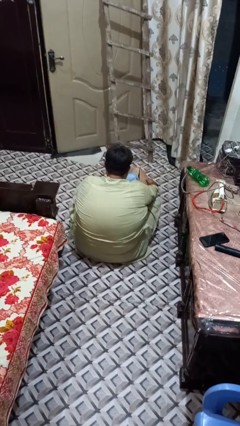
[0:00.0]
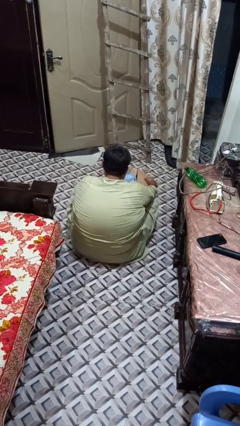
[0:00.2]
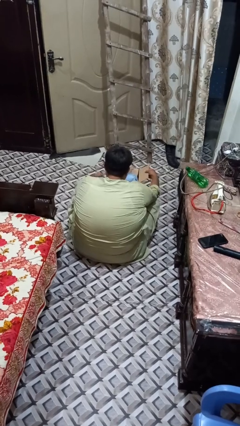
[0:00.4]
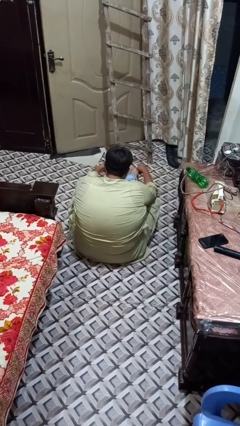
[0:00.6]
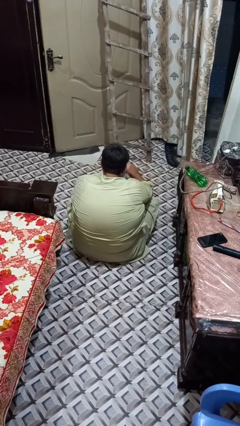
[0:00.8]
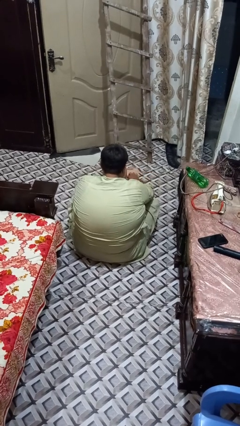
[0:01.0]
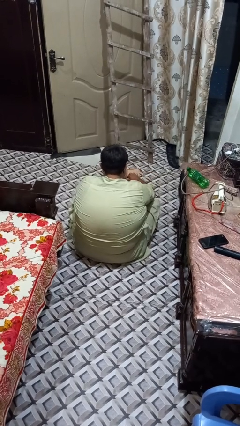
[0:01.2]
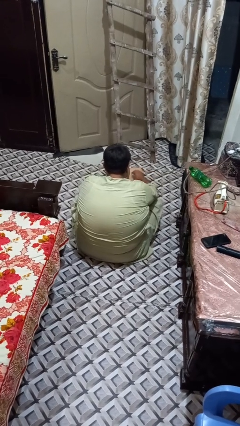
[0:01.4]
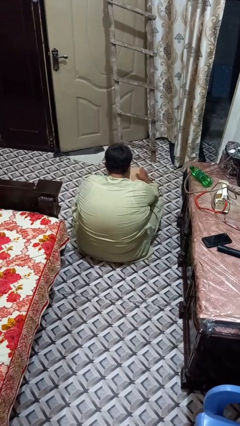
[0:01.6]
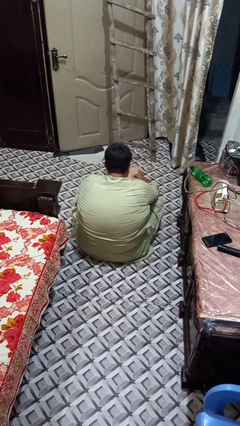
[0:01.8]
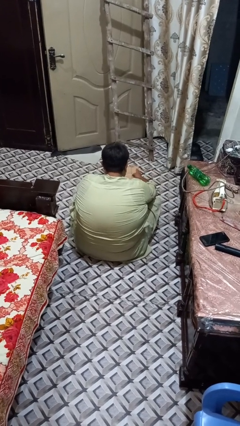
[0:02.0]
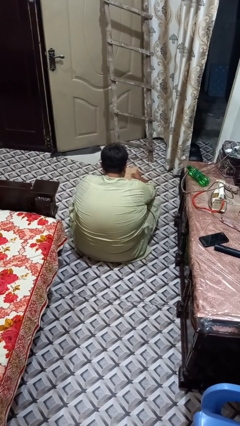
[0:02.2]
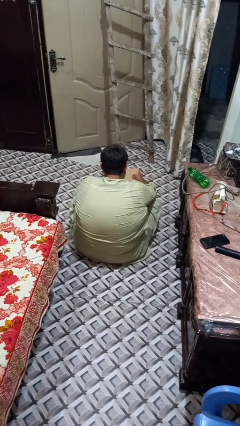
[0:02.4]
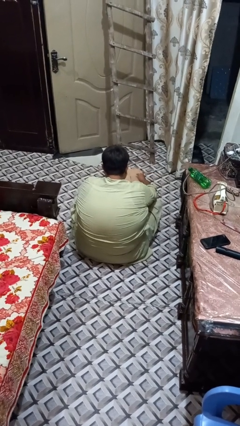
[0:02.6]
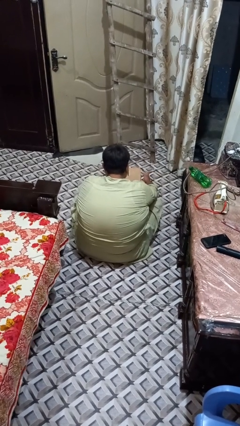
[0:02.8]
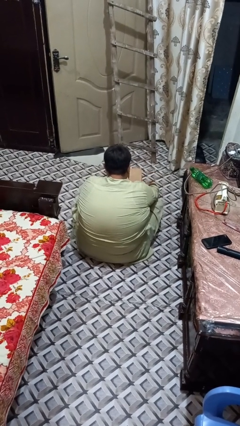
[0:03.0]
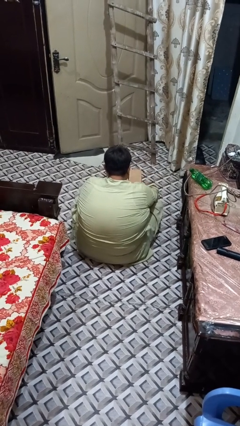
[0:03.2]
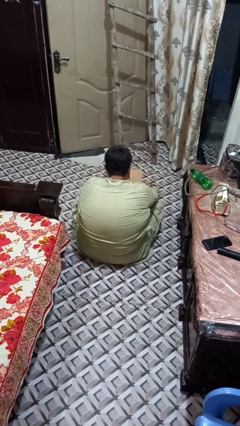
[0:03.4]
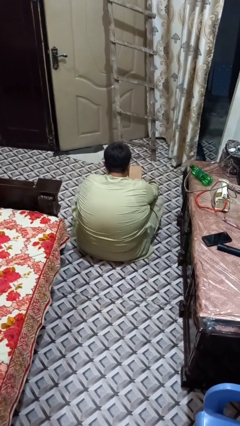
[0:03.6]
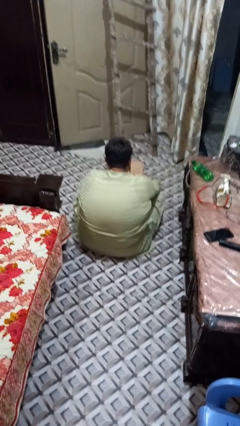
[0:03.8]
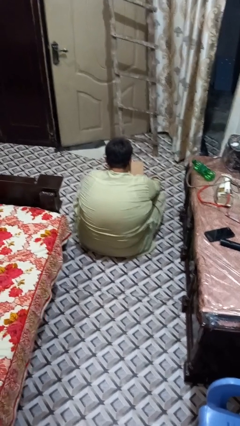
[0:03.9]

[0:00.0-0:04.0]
person closes box

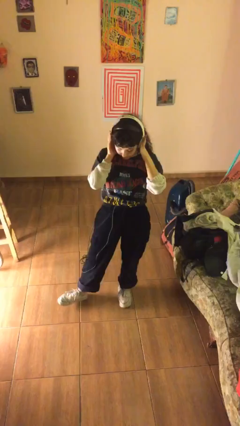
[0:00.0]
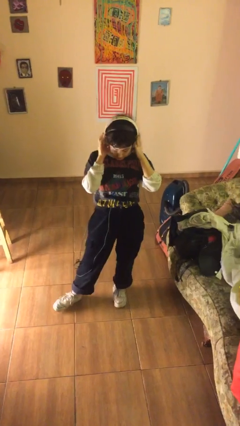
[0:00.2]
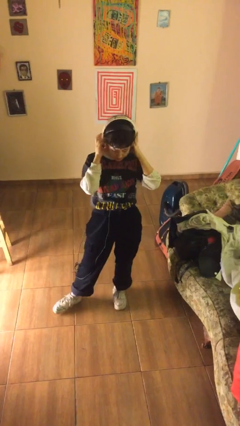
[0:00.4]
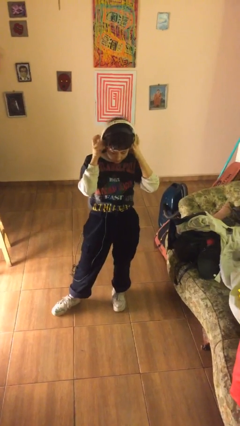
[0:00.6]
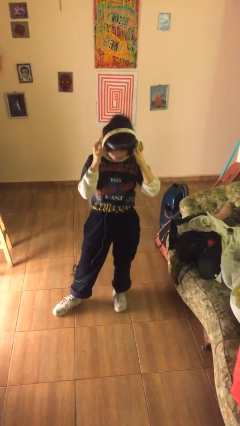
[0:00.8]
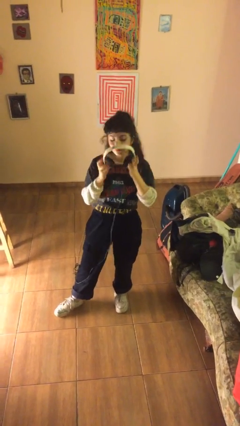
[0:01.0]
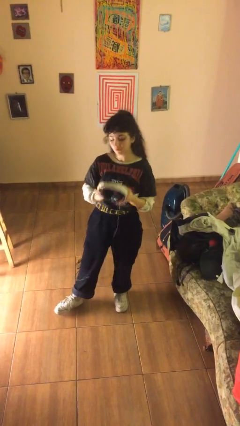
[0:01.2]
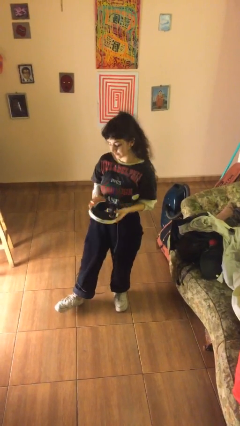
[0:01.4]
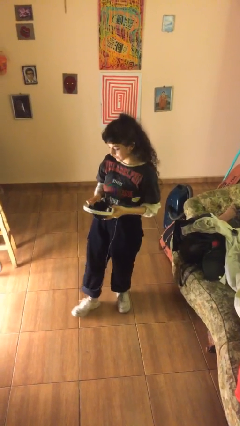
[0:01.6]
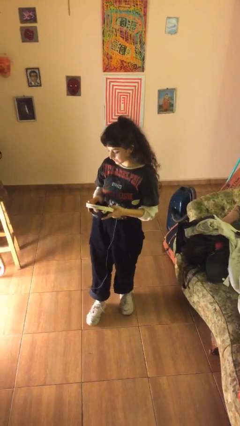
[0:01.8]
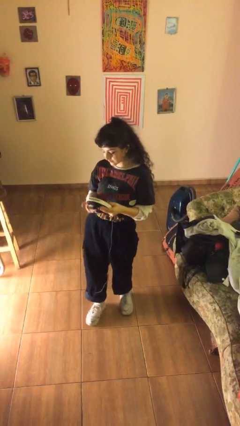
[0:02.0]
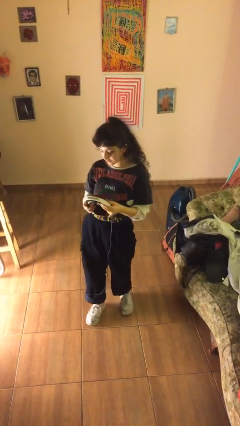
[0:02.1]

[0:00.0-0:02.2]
person takes off headphones

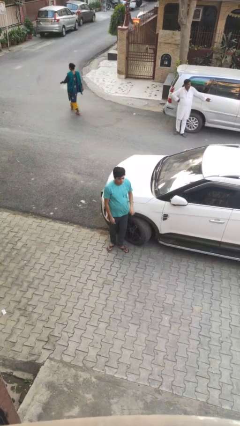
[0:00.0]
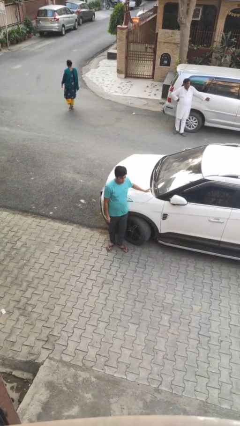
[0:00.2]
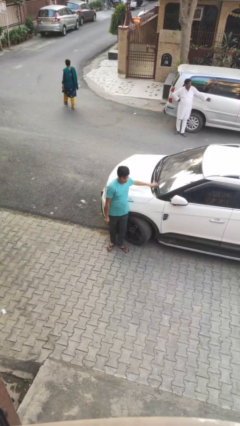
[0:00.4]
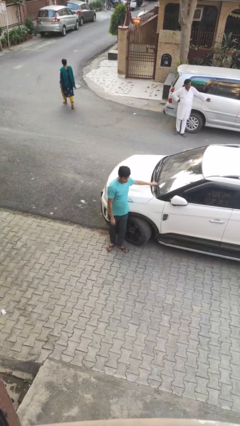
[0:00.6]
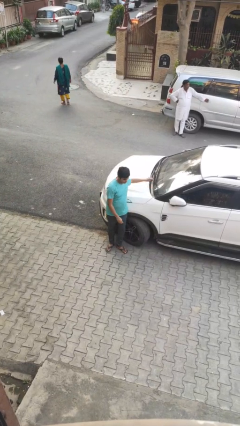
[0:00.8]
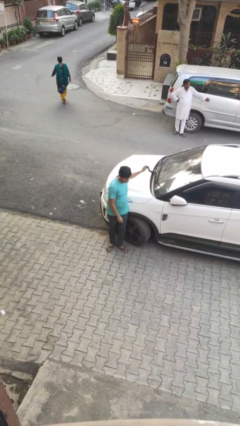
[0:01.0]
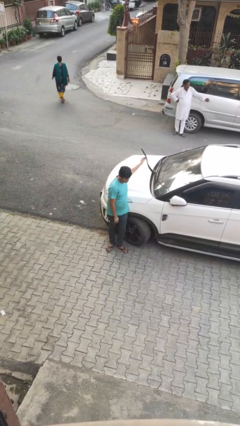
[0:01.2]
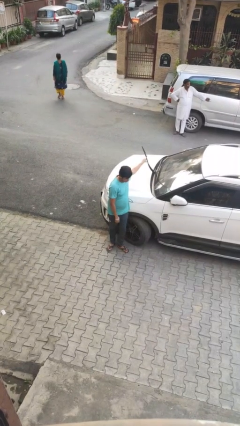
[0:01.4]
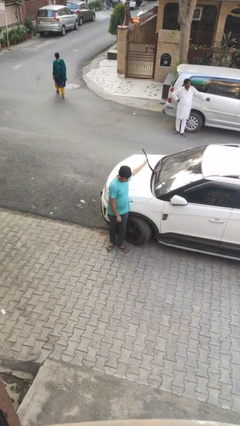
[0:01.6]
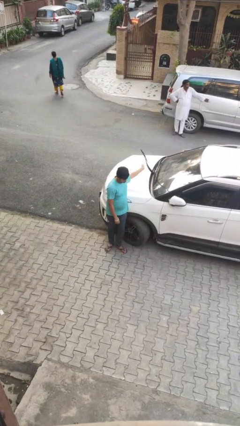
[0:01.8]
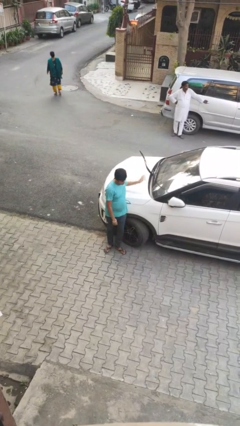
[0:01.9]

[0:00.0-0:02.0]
person flips up car wipers

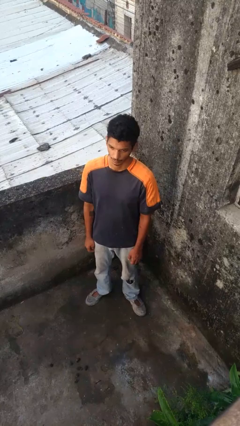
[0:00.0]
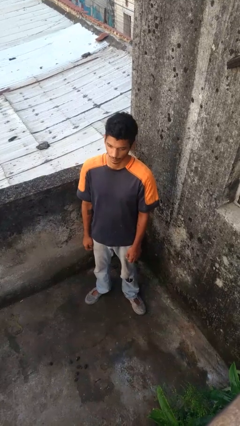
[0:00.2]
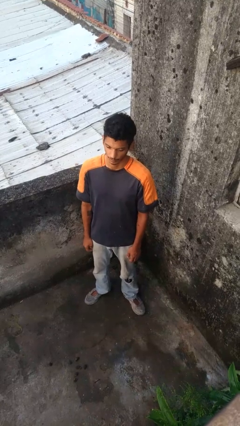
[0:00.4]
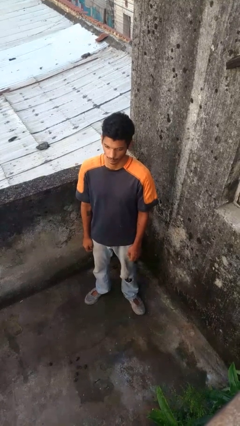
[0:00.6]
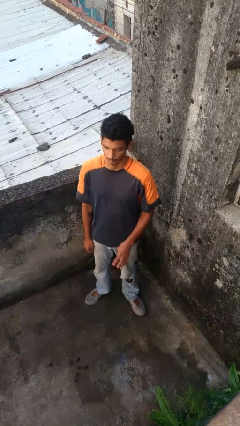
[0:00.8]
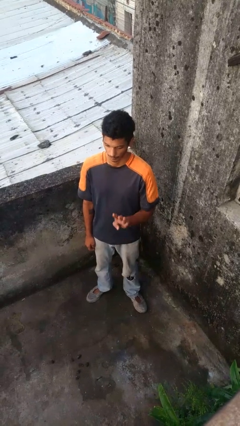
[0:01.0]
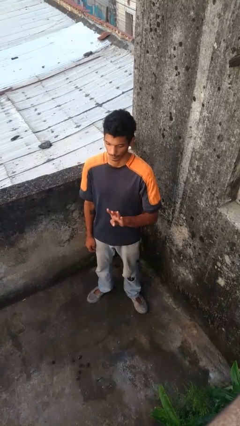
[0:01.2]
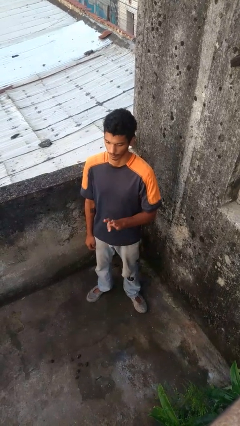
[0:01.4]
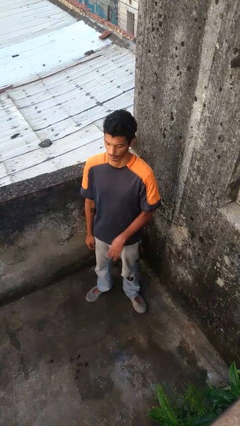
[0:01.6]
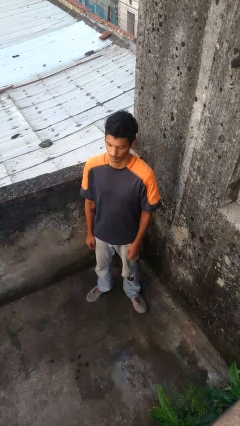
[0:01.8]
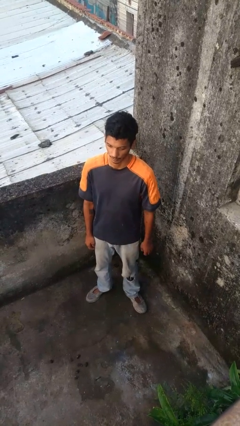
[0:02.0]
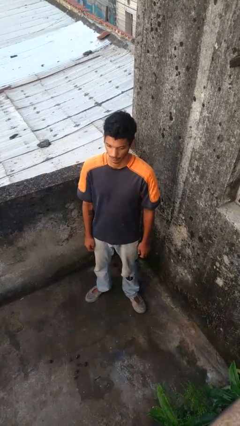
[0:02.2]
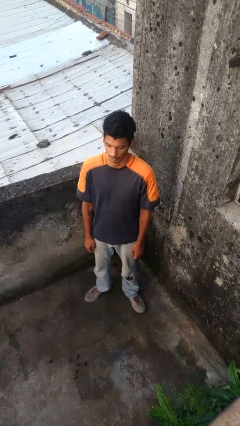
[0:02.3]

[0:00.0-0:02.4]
person gestures number four

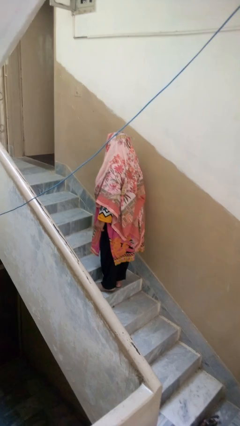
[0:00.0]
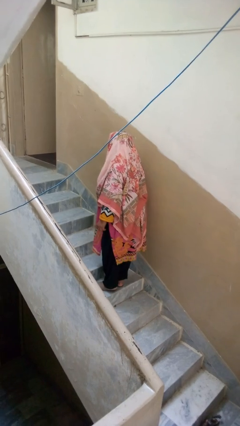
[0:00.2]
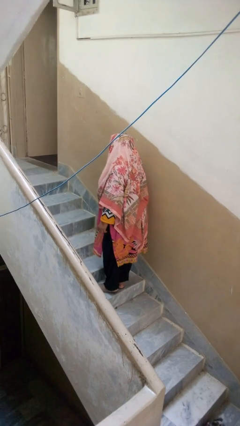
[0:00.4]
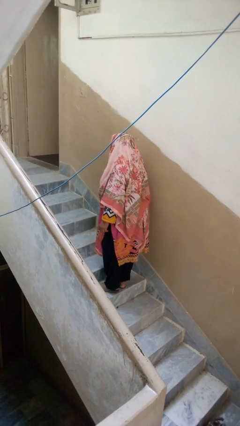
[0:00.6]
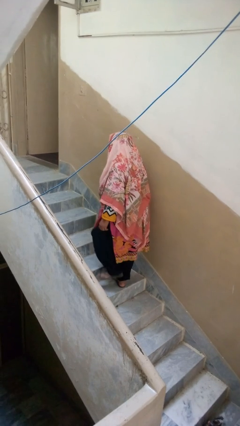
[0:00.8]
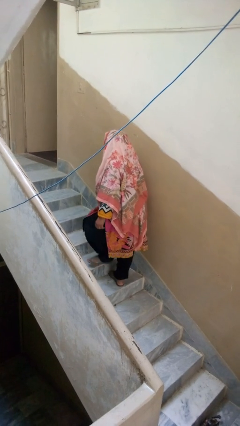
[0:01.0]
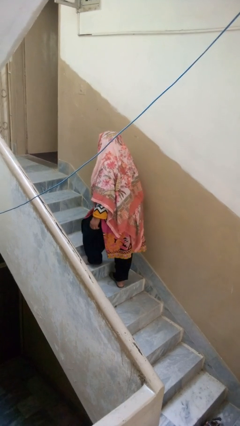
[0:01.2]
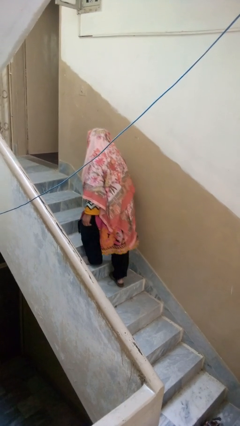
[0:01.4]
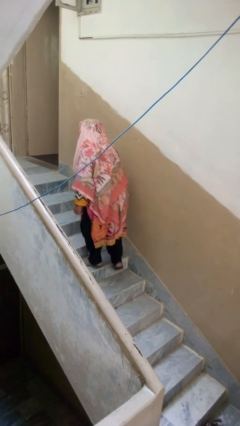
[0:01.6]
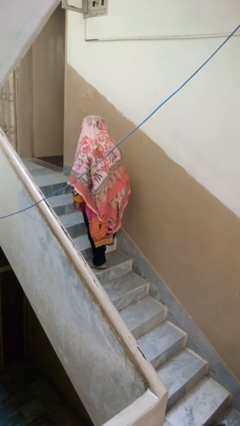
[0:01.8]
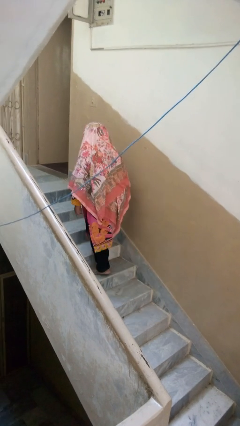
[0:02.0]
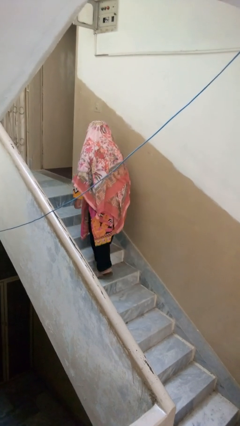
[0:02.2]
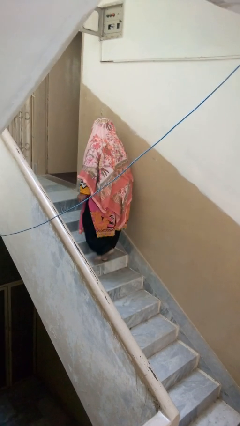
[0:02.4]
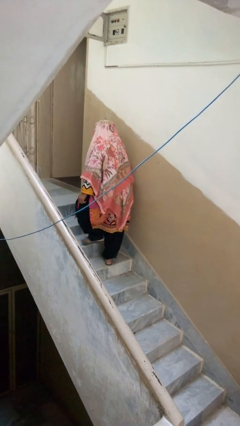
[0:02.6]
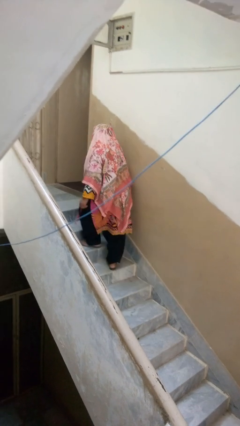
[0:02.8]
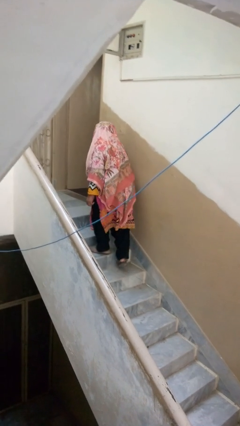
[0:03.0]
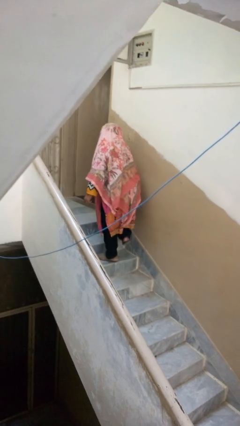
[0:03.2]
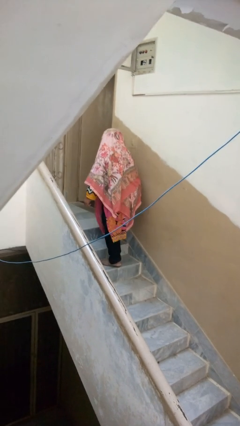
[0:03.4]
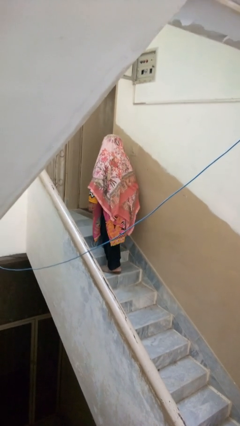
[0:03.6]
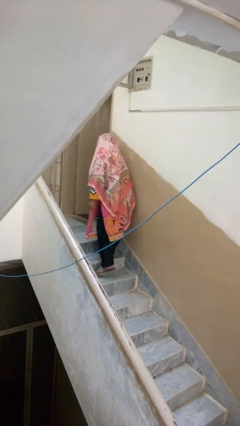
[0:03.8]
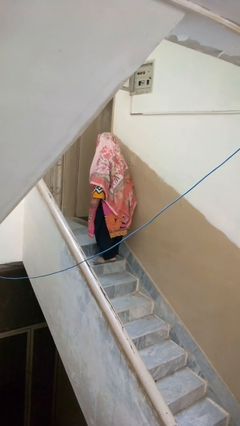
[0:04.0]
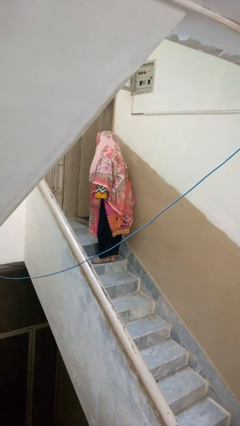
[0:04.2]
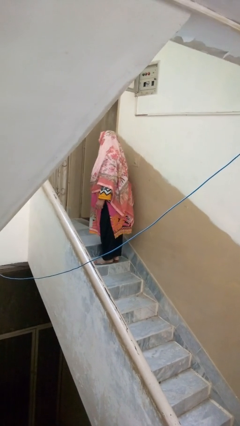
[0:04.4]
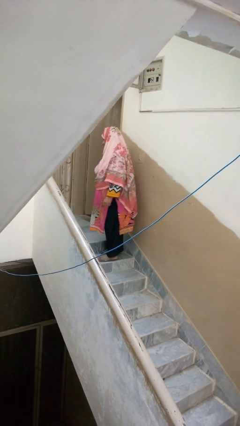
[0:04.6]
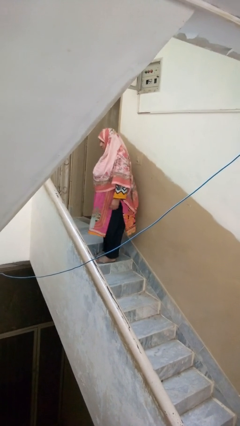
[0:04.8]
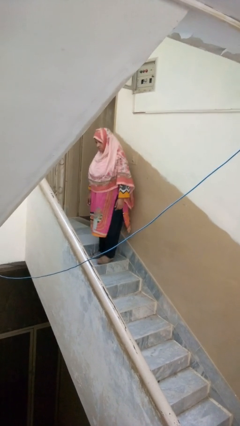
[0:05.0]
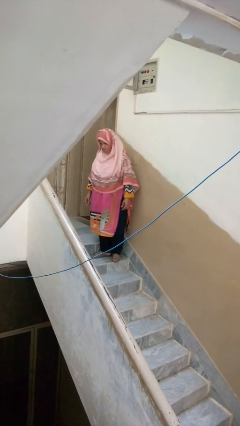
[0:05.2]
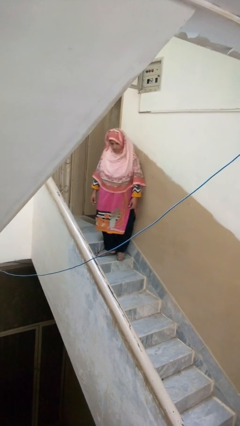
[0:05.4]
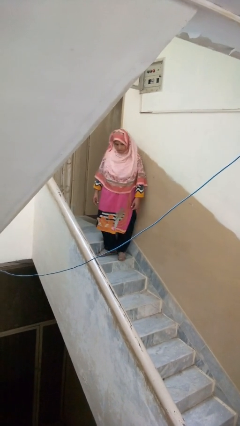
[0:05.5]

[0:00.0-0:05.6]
person climbs up stairs

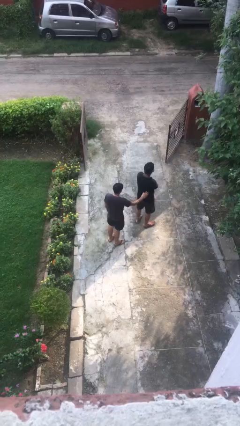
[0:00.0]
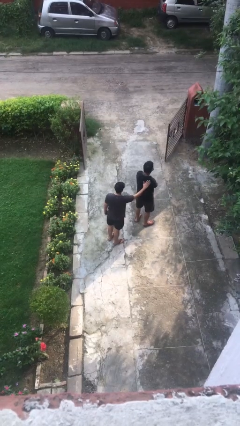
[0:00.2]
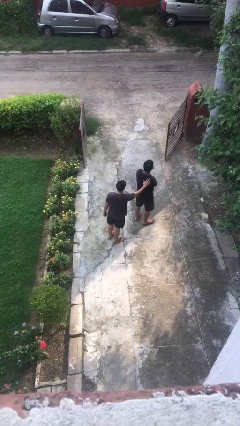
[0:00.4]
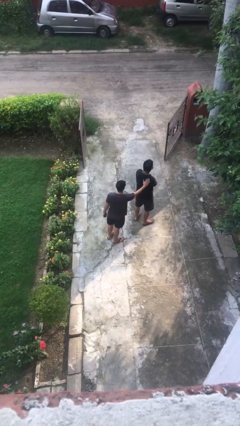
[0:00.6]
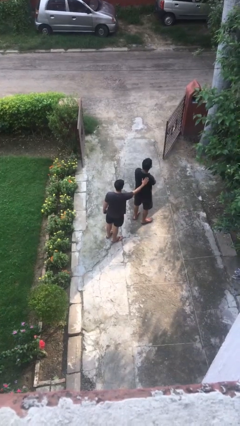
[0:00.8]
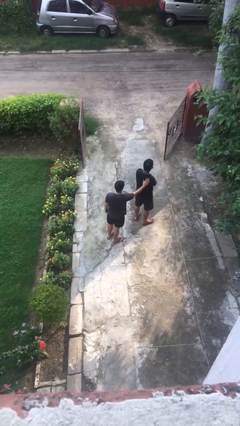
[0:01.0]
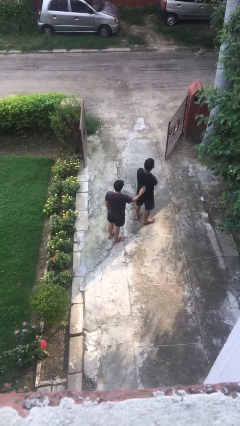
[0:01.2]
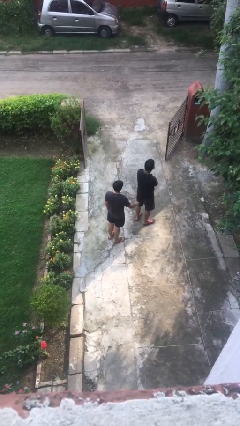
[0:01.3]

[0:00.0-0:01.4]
person touches back of person
